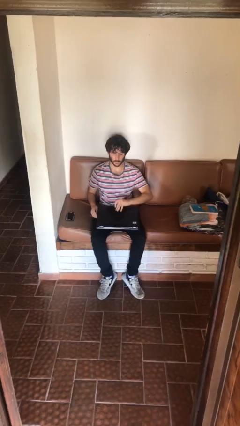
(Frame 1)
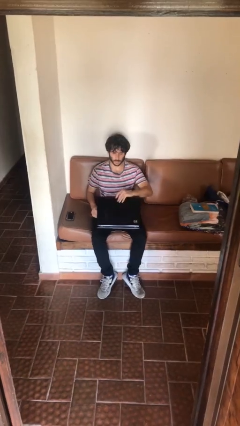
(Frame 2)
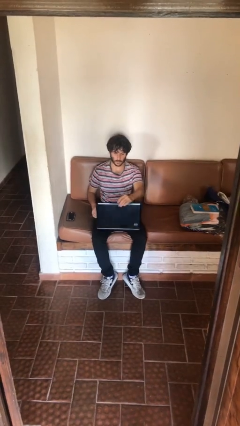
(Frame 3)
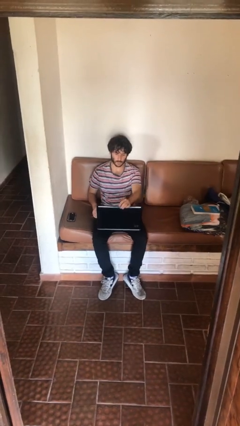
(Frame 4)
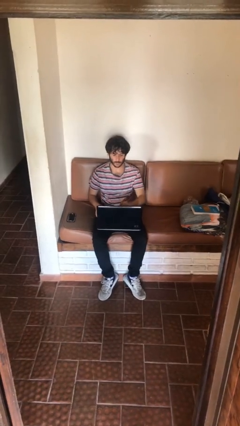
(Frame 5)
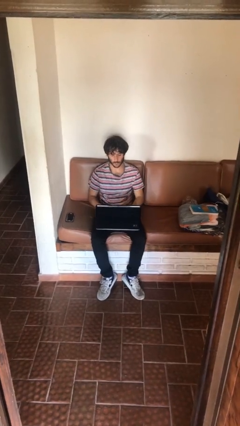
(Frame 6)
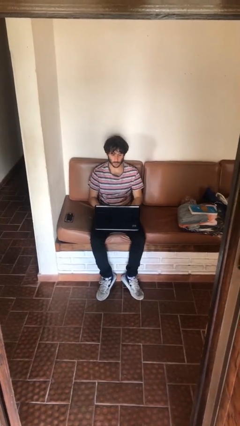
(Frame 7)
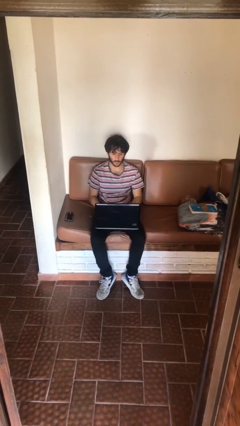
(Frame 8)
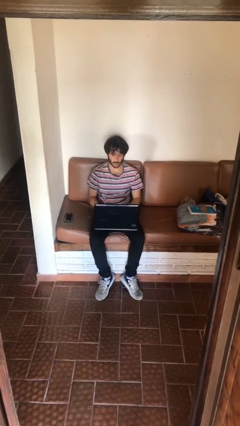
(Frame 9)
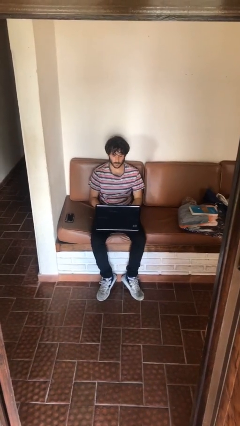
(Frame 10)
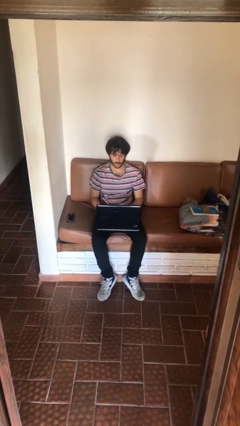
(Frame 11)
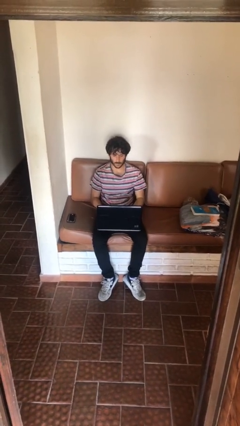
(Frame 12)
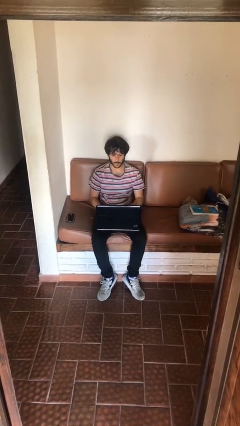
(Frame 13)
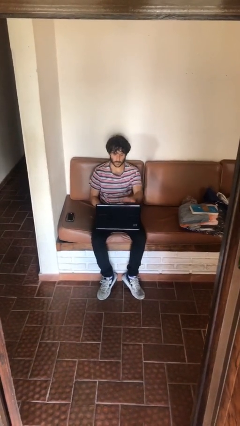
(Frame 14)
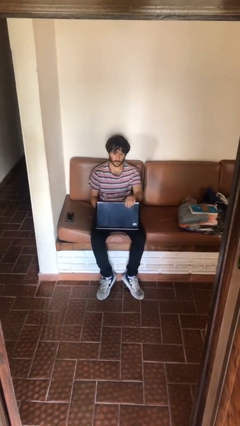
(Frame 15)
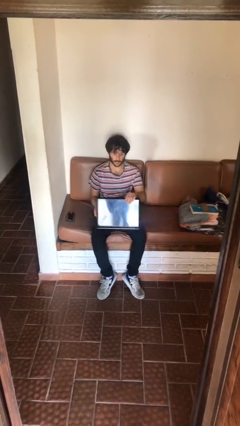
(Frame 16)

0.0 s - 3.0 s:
person interacts with laptop

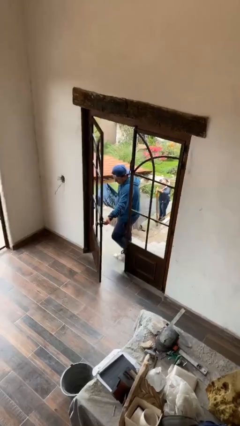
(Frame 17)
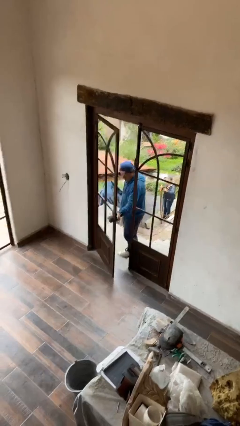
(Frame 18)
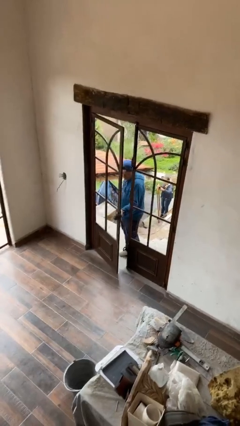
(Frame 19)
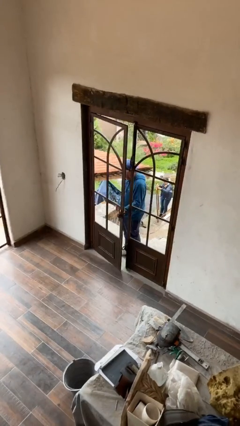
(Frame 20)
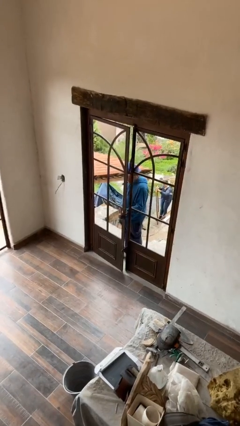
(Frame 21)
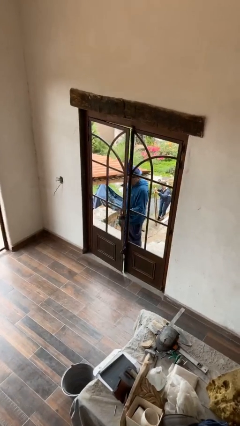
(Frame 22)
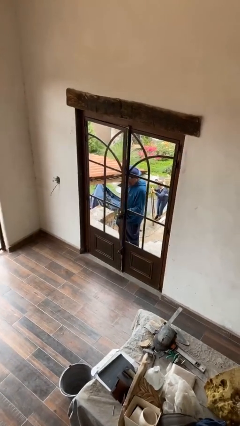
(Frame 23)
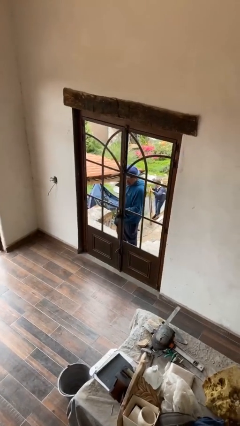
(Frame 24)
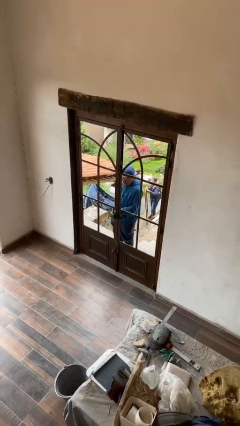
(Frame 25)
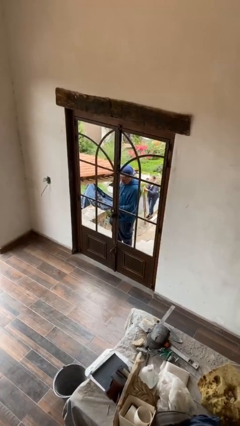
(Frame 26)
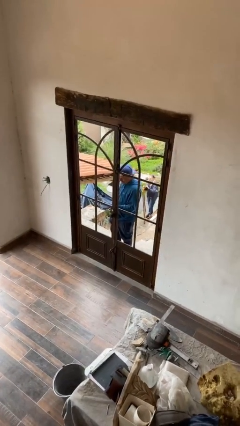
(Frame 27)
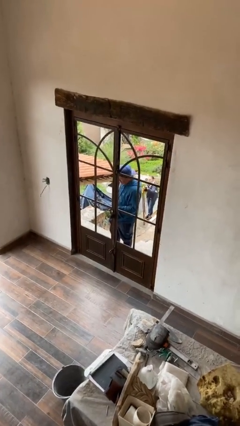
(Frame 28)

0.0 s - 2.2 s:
person closes facility door

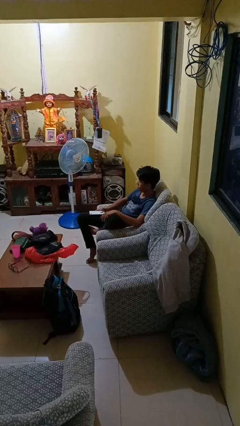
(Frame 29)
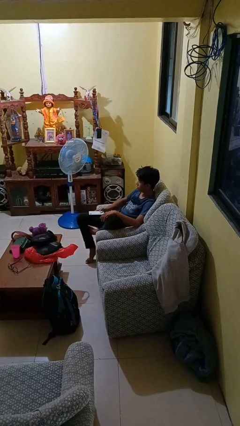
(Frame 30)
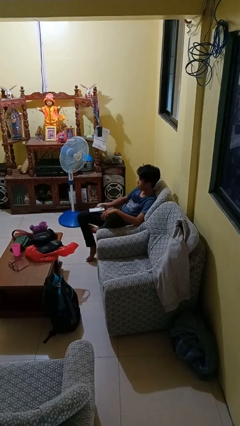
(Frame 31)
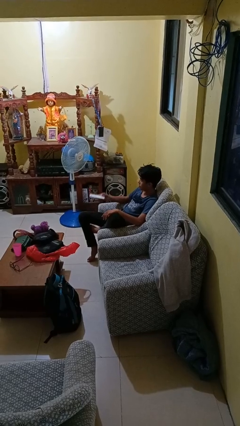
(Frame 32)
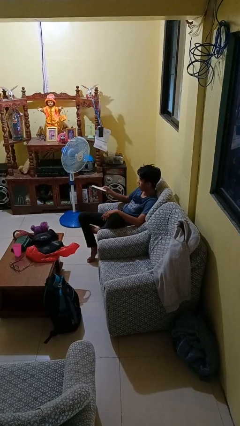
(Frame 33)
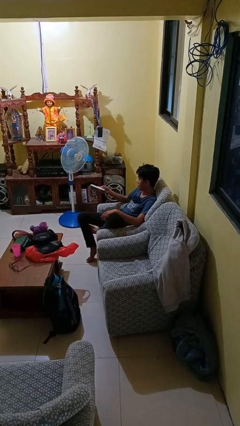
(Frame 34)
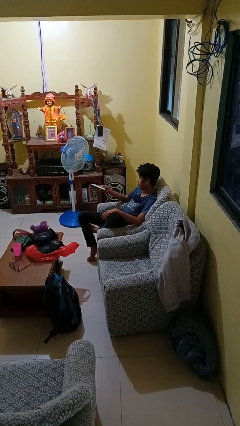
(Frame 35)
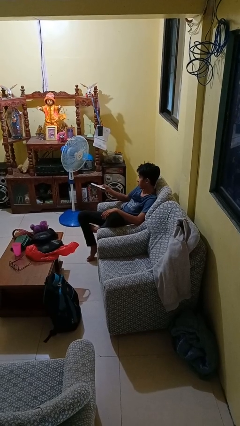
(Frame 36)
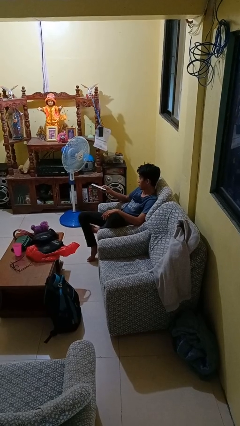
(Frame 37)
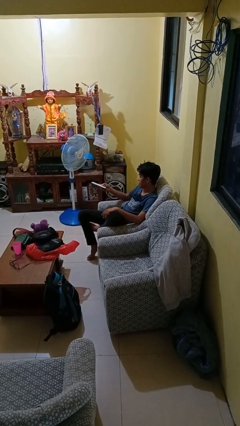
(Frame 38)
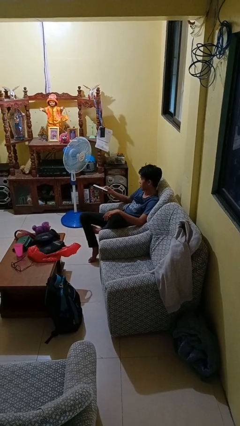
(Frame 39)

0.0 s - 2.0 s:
person uses television remote

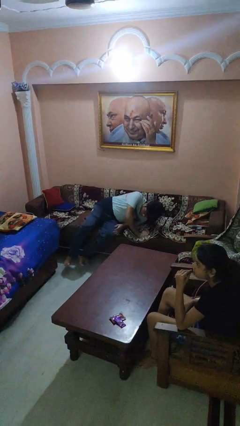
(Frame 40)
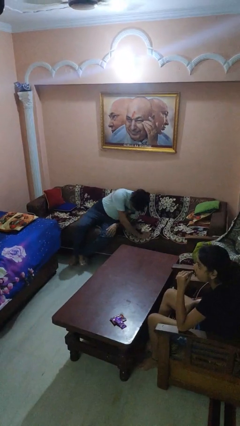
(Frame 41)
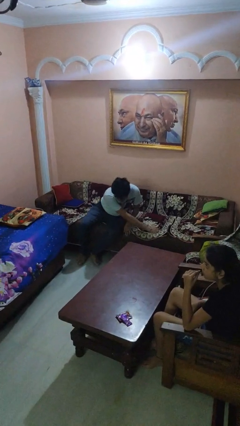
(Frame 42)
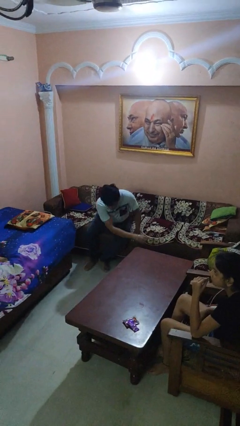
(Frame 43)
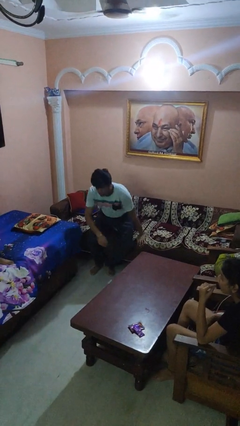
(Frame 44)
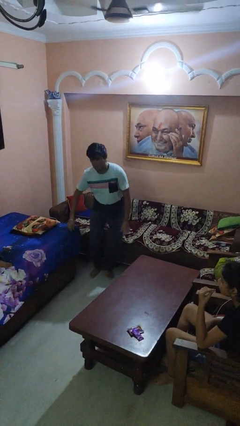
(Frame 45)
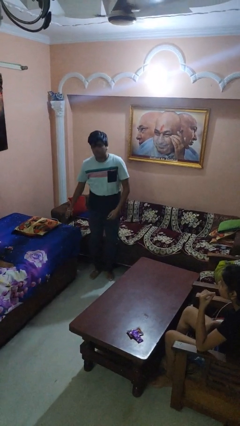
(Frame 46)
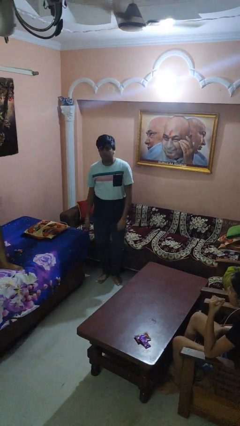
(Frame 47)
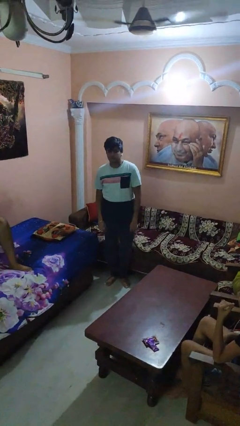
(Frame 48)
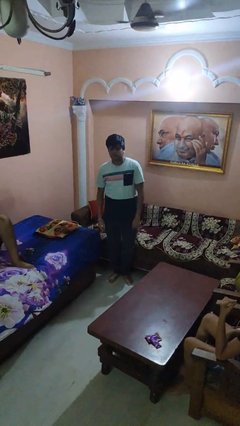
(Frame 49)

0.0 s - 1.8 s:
person stands up

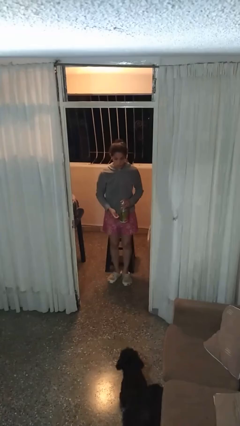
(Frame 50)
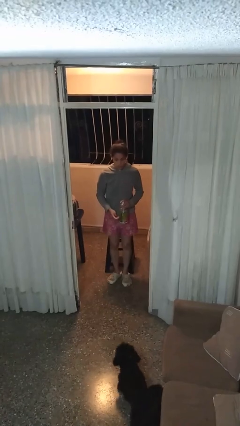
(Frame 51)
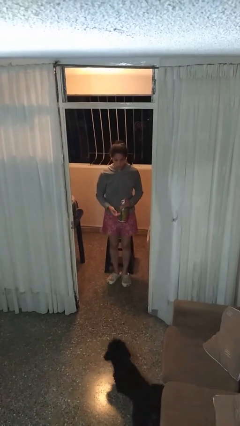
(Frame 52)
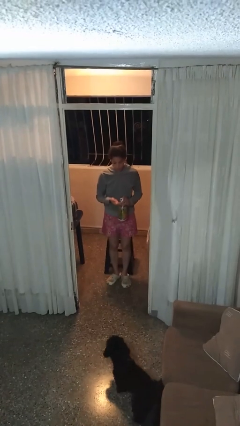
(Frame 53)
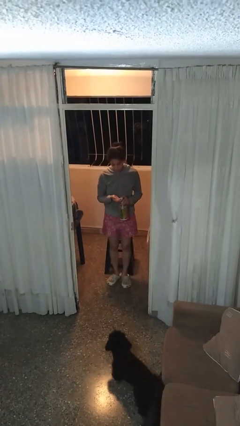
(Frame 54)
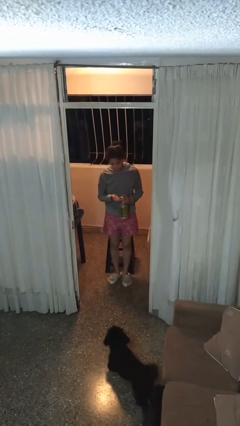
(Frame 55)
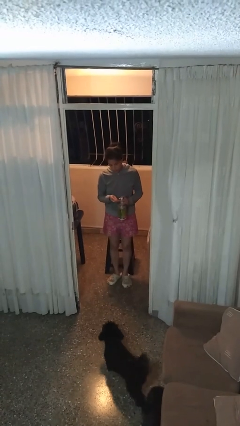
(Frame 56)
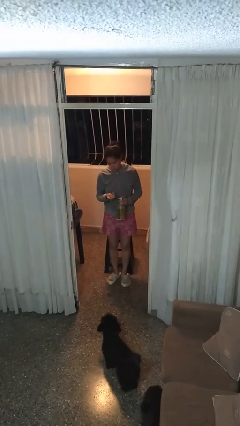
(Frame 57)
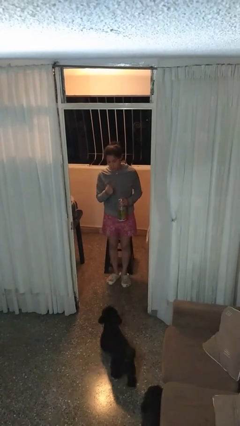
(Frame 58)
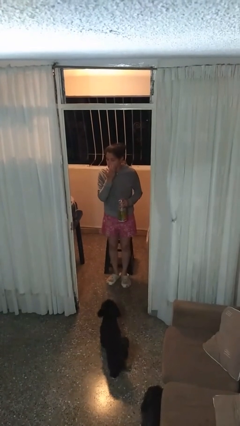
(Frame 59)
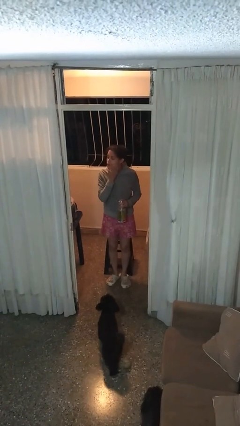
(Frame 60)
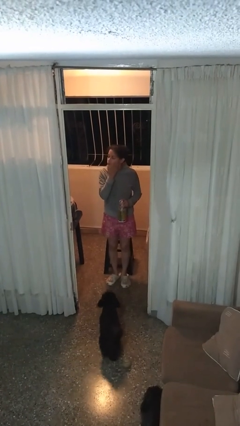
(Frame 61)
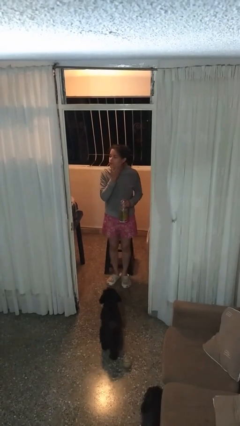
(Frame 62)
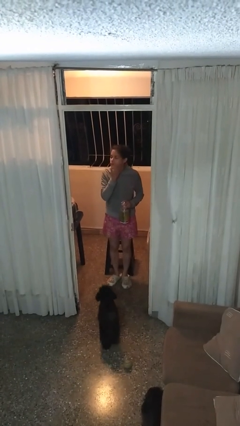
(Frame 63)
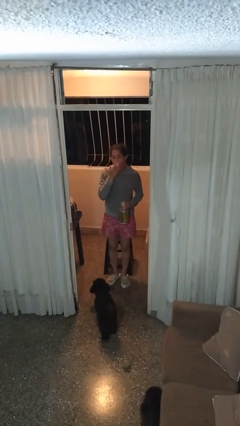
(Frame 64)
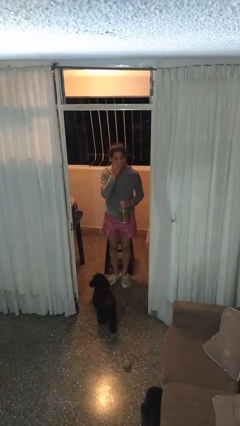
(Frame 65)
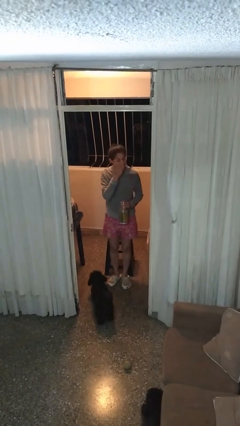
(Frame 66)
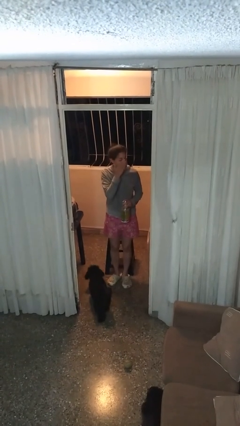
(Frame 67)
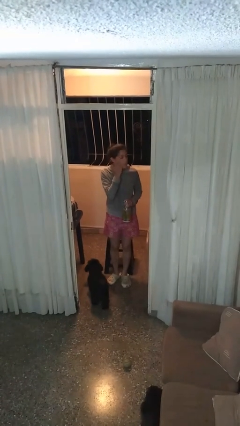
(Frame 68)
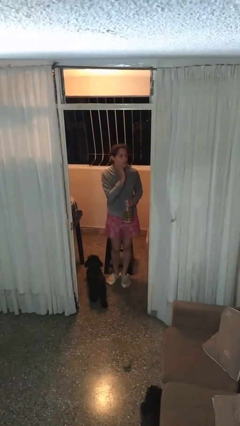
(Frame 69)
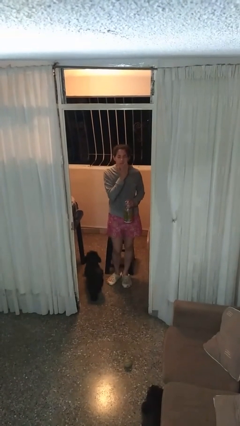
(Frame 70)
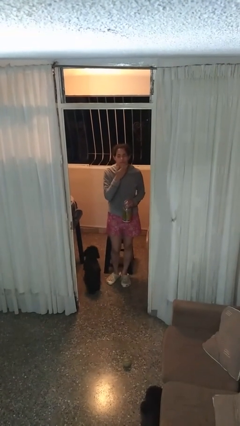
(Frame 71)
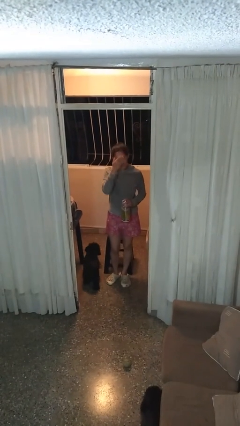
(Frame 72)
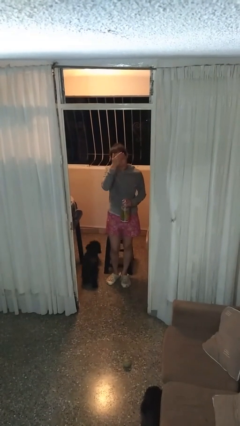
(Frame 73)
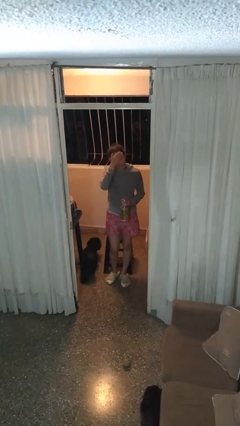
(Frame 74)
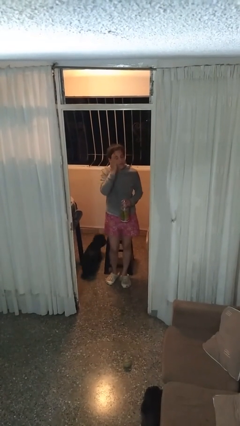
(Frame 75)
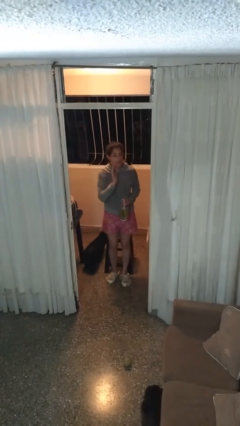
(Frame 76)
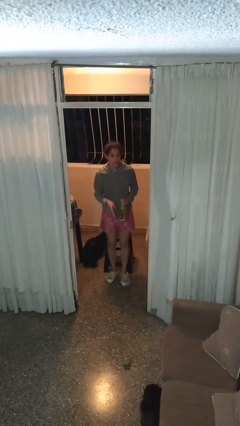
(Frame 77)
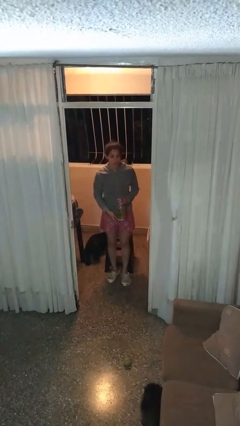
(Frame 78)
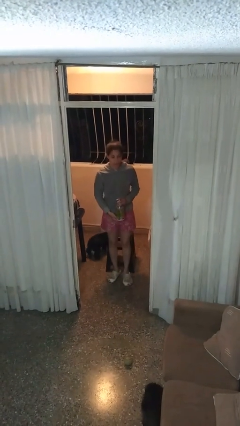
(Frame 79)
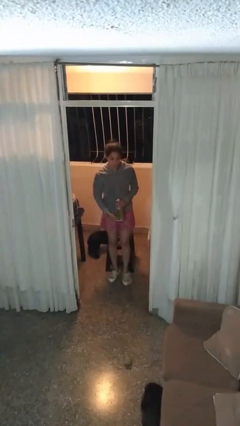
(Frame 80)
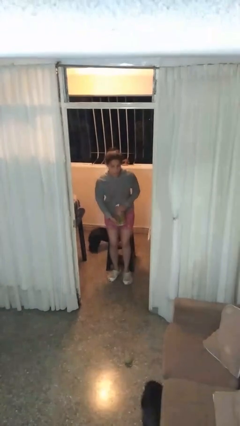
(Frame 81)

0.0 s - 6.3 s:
person applies facial moisturizer

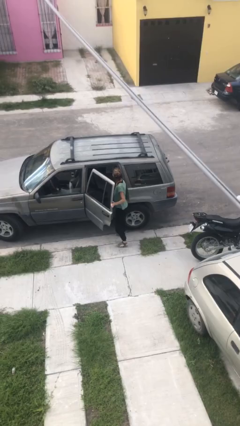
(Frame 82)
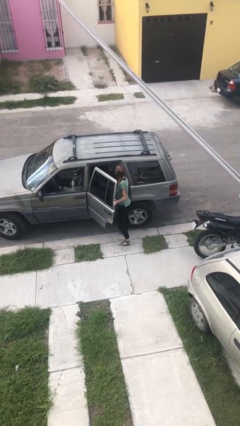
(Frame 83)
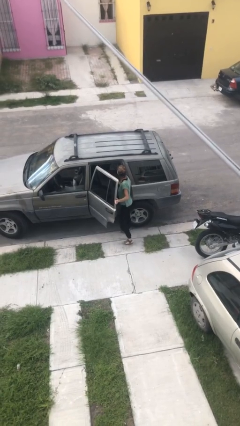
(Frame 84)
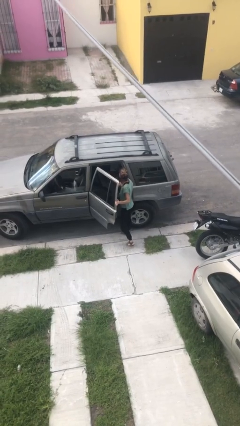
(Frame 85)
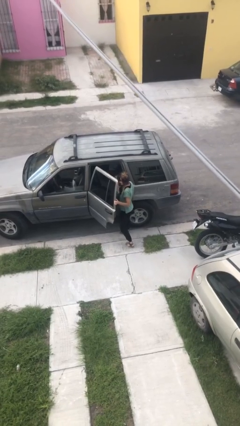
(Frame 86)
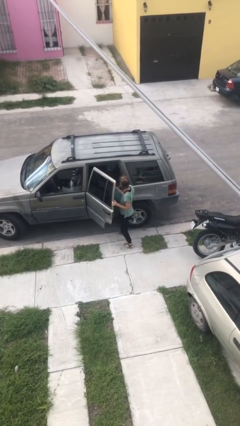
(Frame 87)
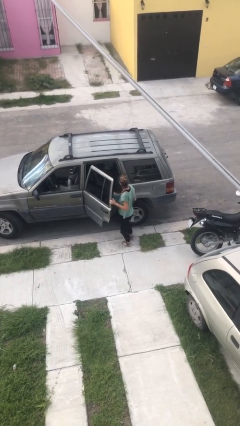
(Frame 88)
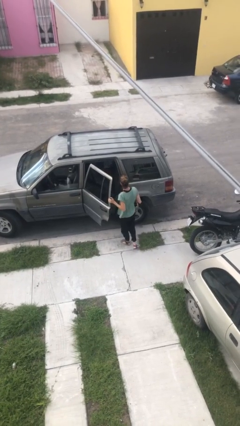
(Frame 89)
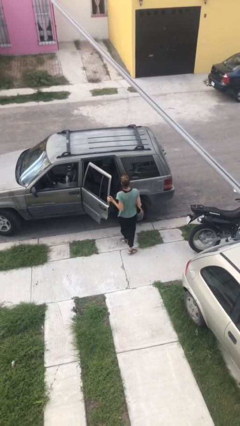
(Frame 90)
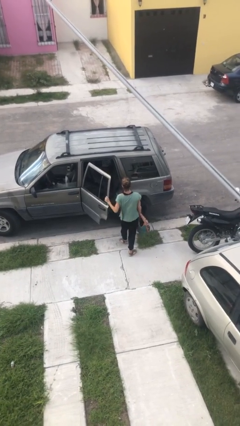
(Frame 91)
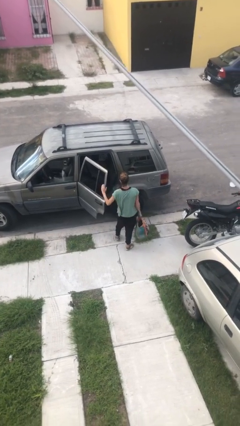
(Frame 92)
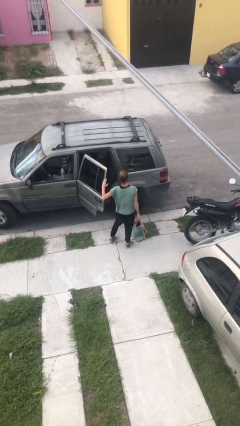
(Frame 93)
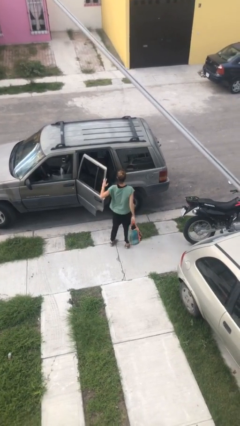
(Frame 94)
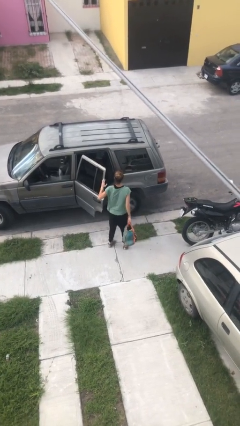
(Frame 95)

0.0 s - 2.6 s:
person unloads car
